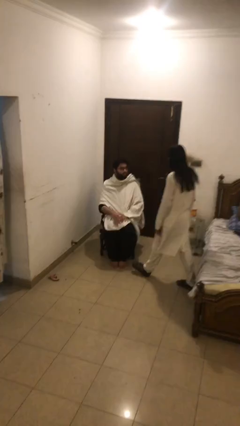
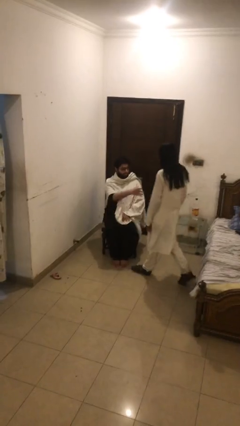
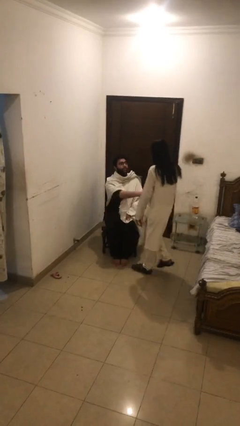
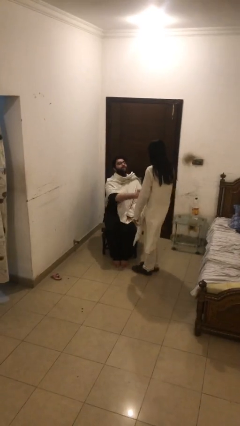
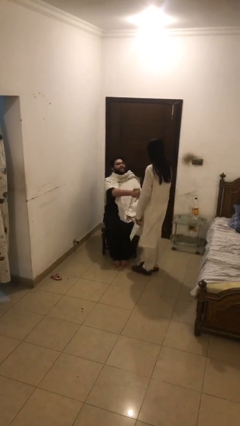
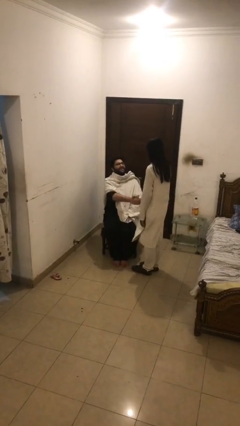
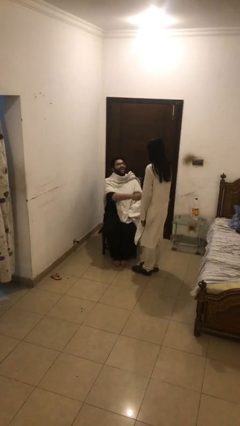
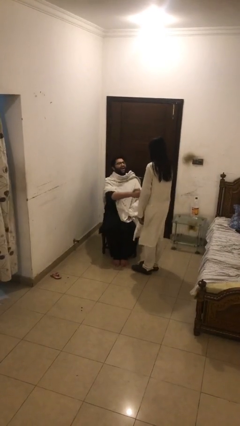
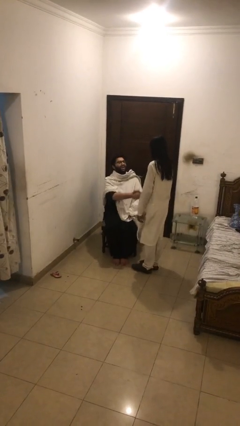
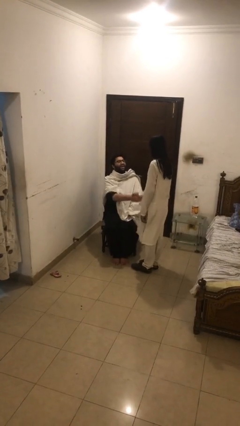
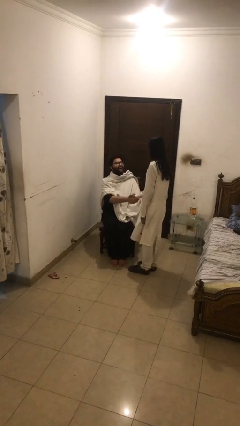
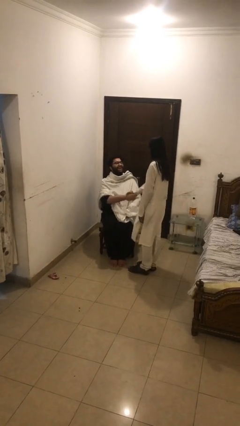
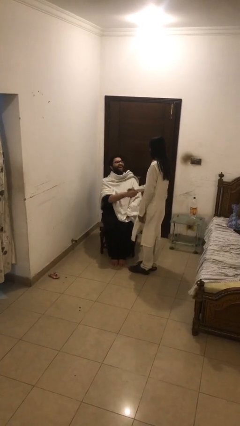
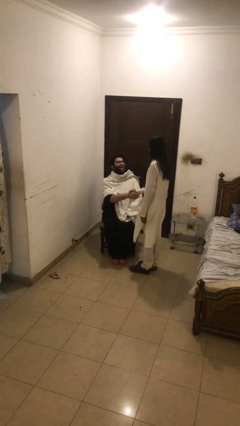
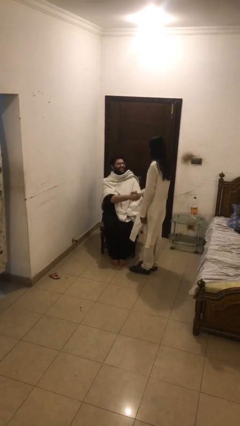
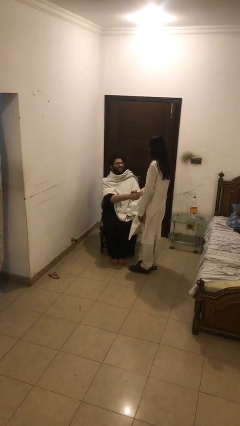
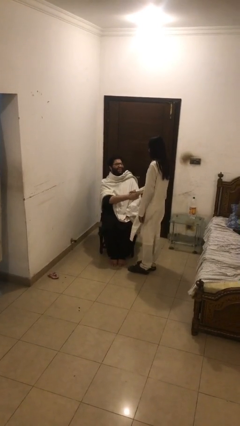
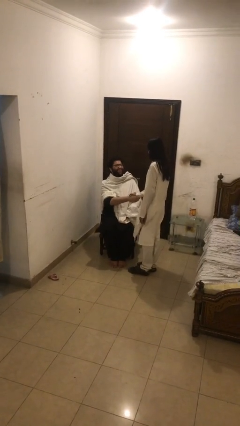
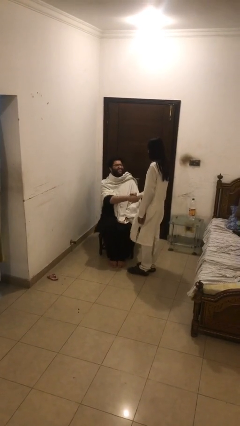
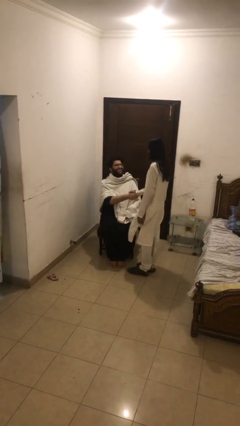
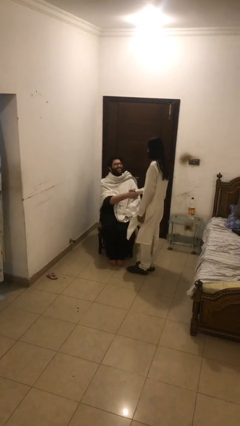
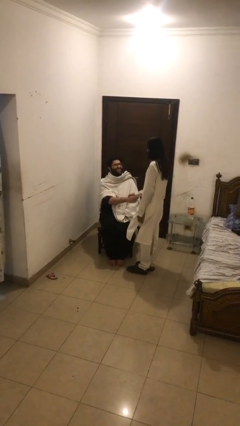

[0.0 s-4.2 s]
person shakes hand

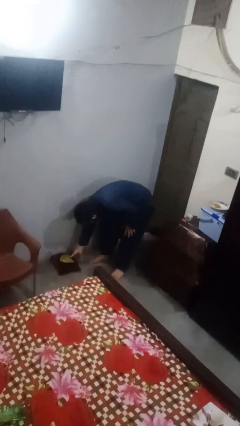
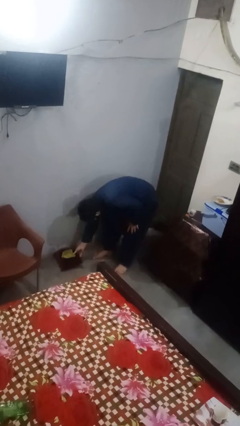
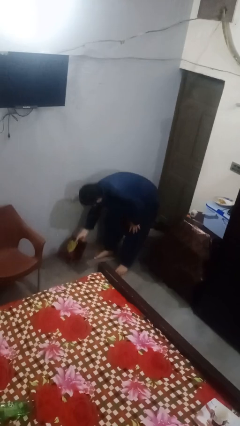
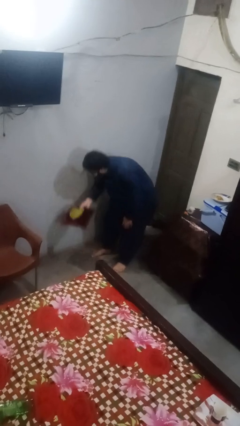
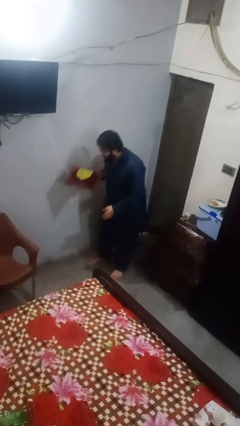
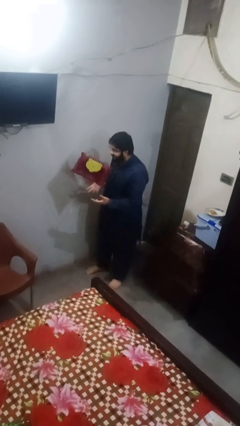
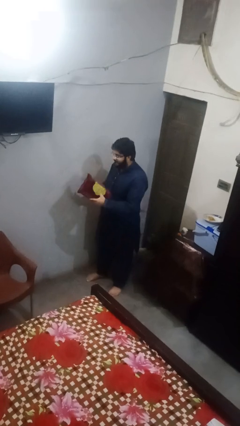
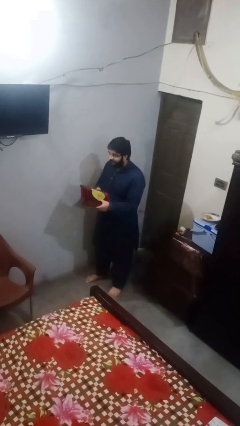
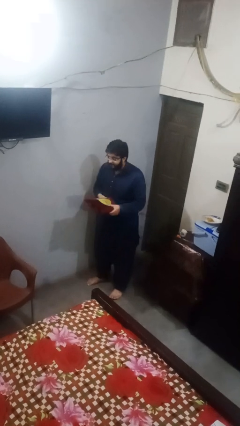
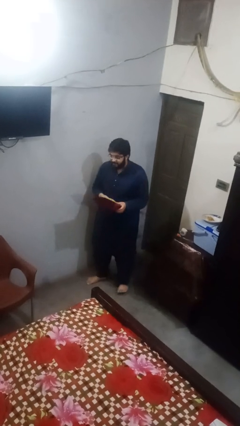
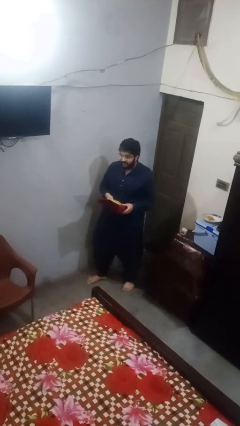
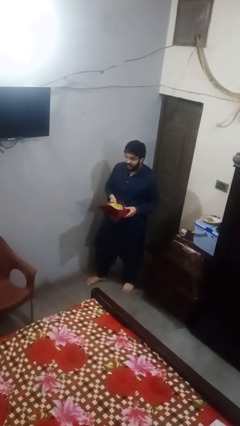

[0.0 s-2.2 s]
person picks up object from floor

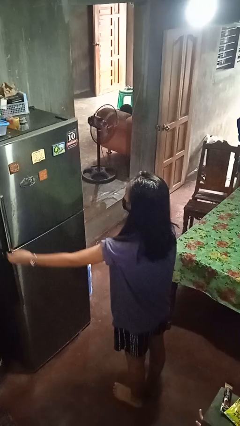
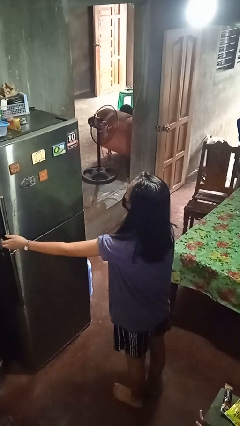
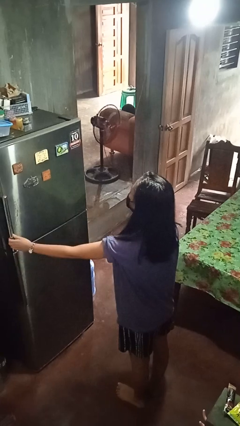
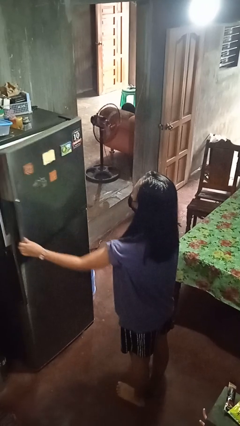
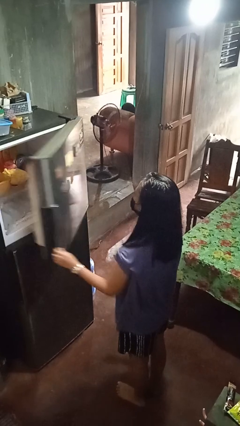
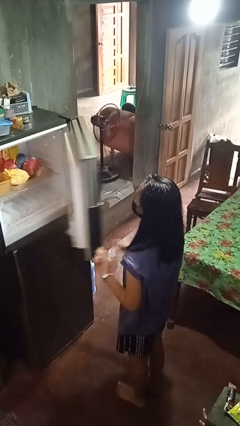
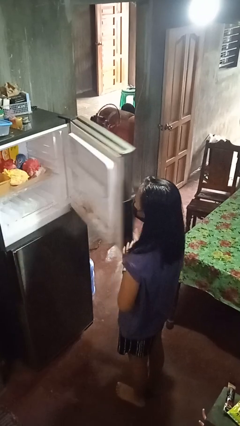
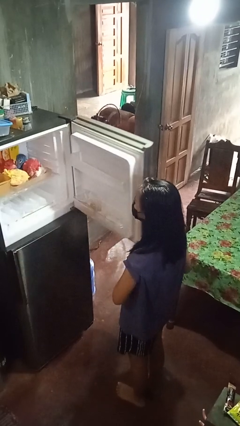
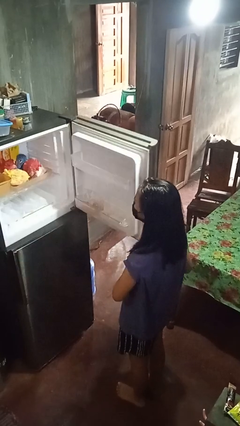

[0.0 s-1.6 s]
person opens refrigerator

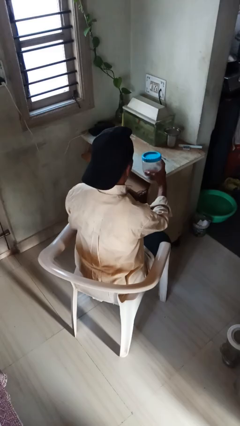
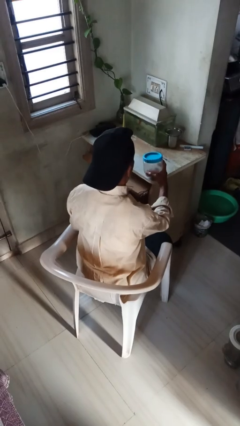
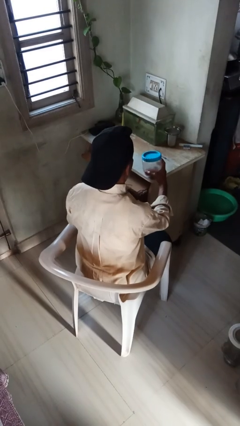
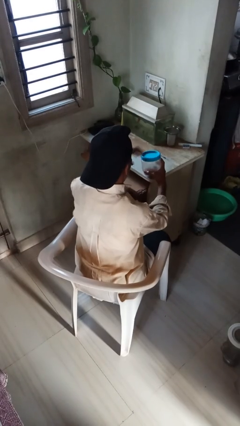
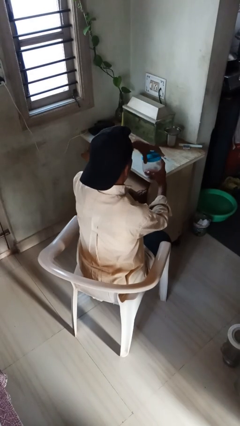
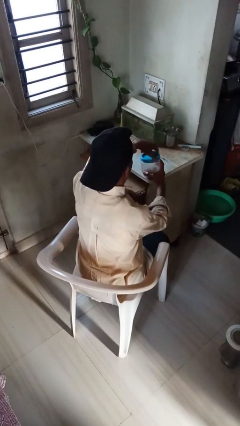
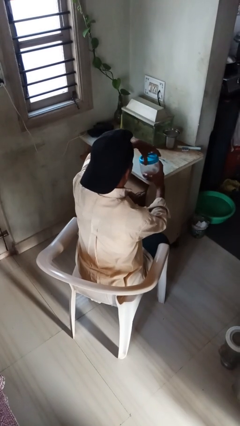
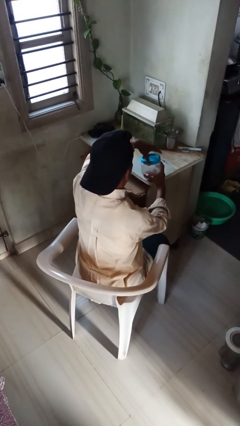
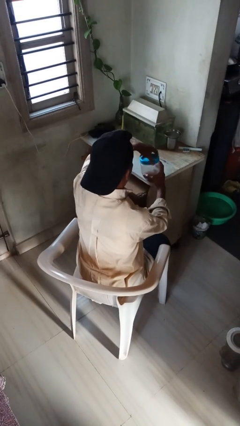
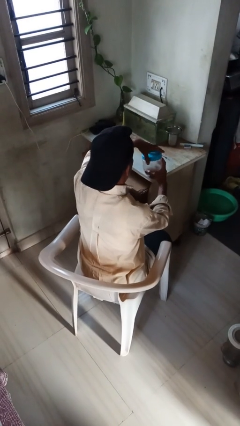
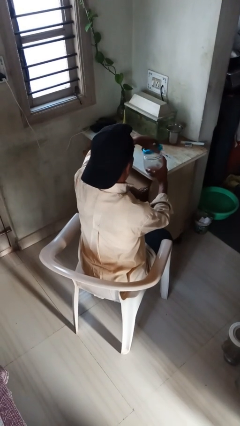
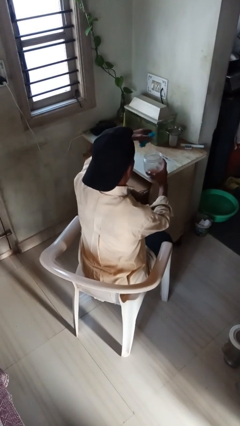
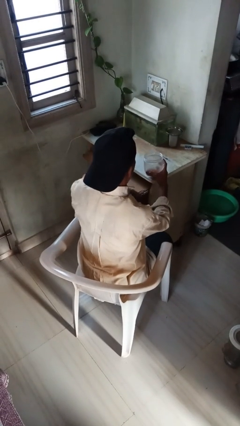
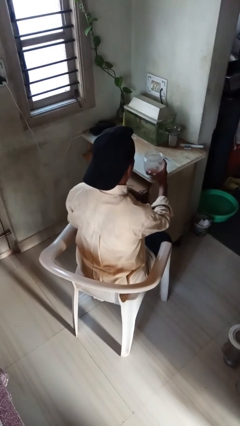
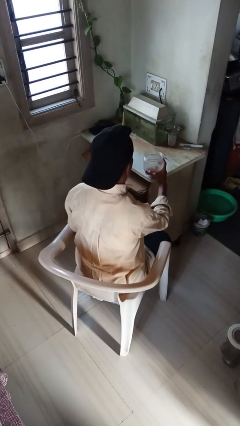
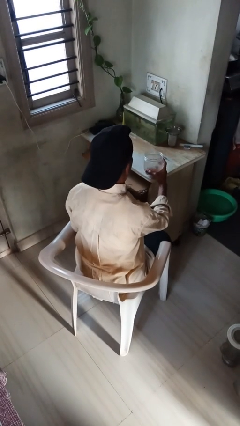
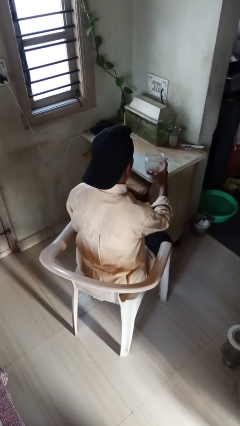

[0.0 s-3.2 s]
person opens jar

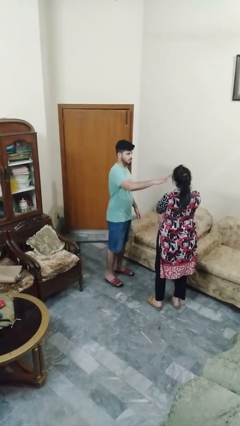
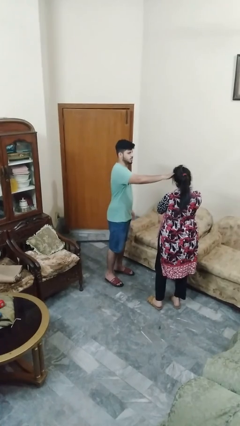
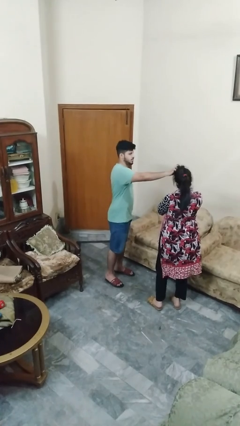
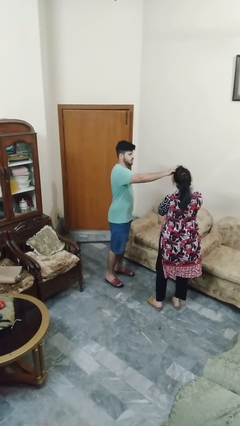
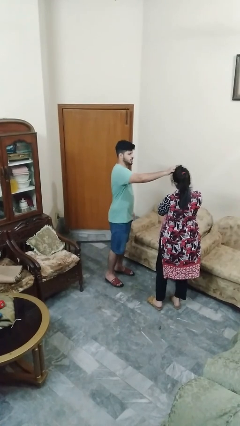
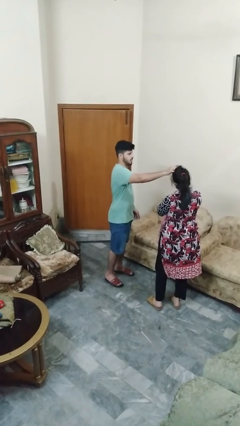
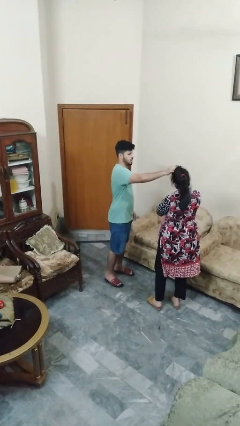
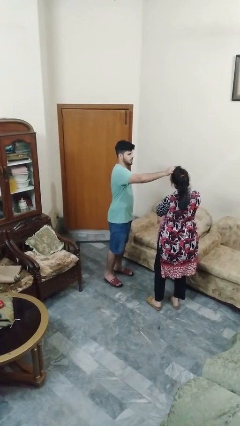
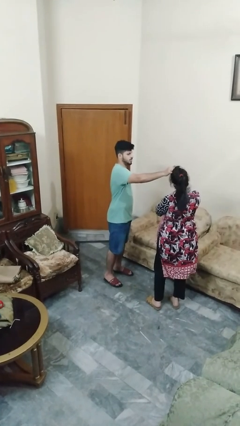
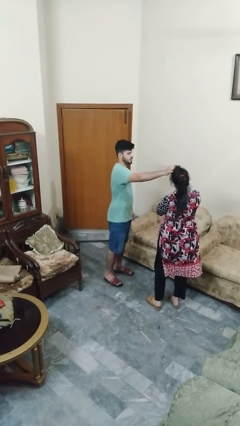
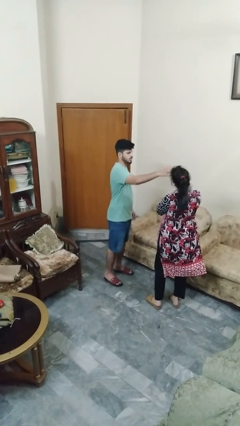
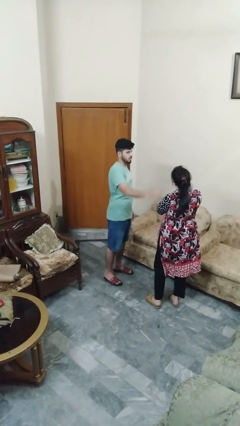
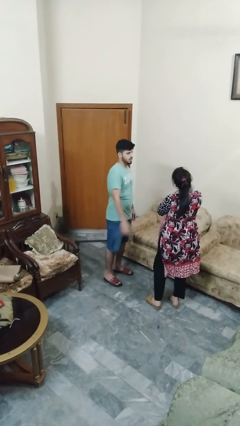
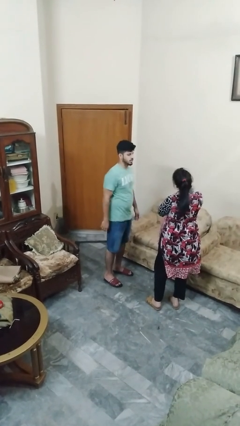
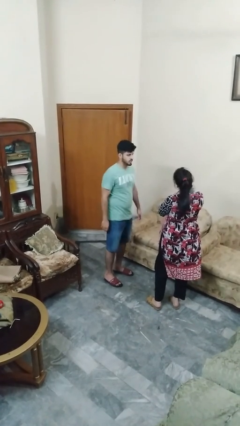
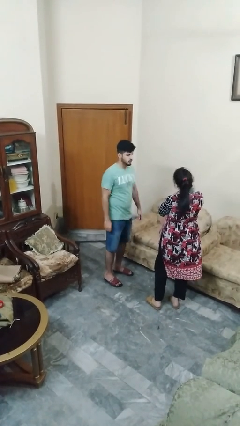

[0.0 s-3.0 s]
person grabs person by hair

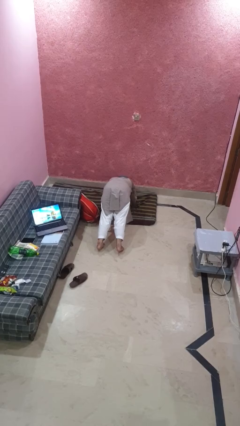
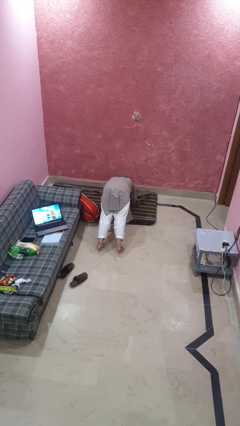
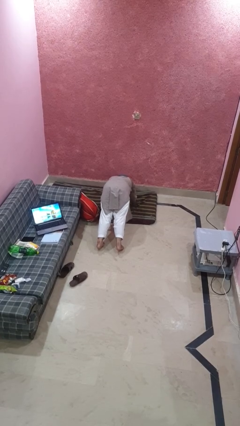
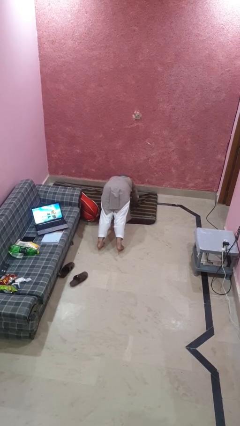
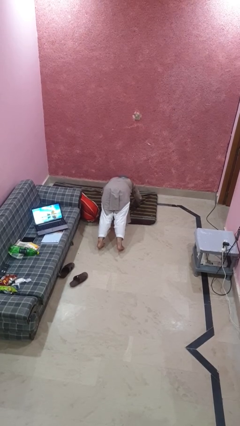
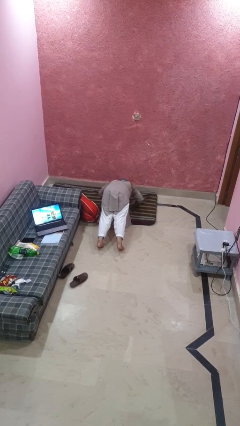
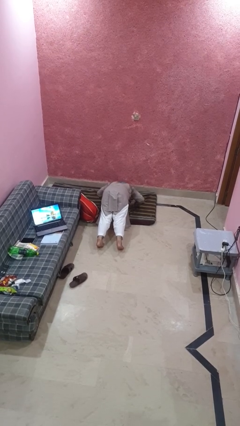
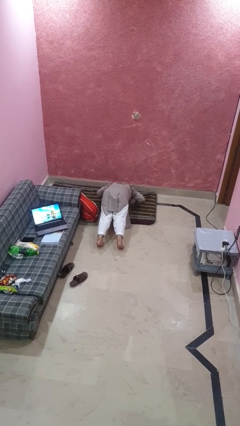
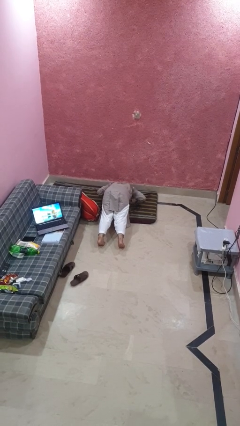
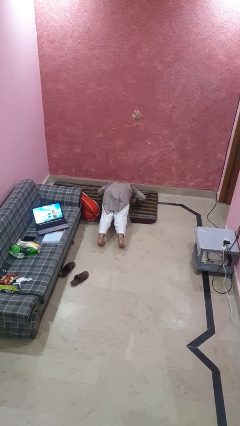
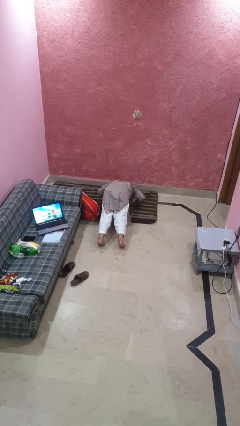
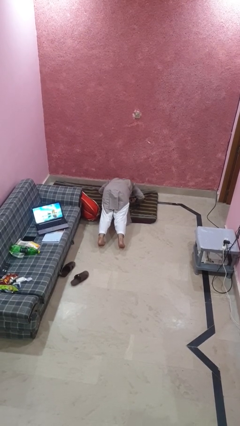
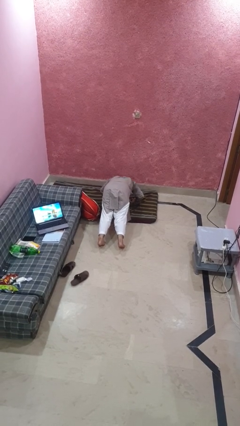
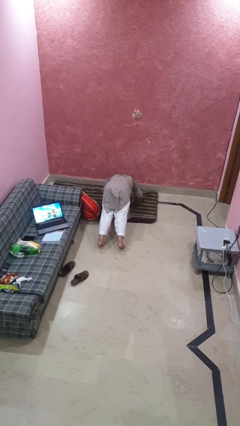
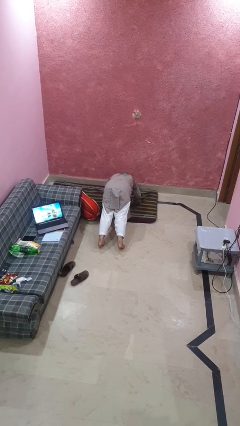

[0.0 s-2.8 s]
person exercises with pushup
